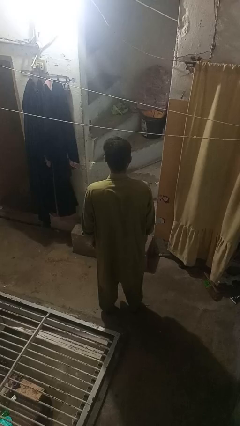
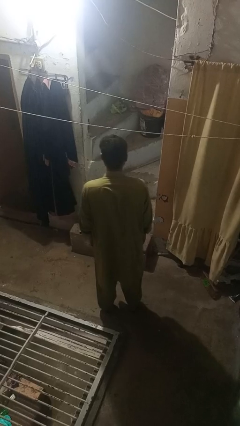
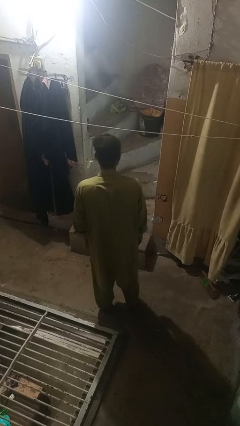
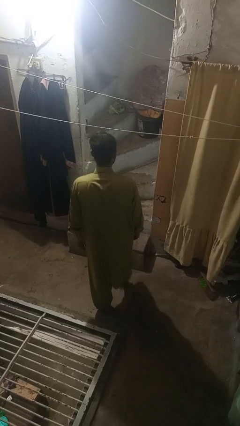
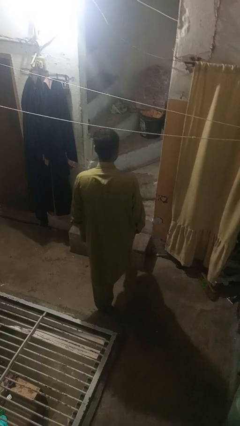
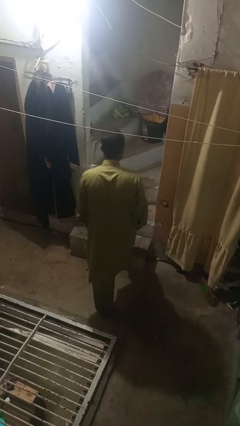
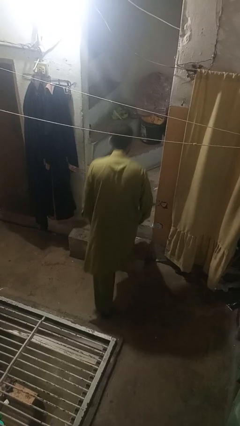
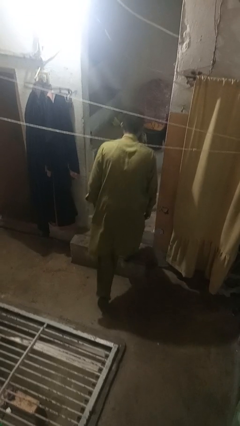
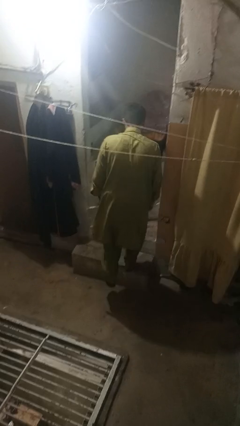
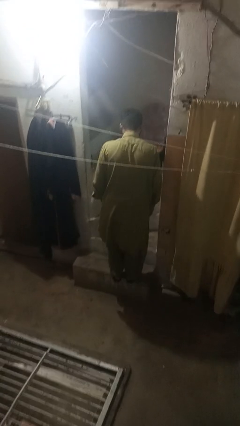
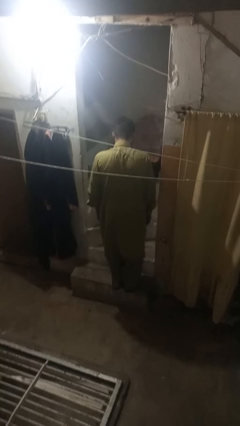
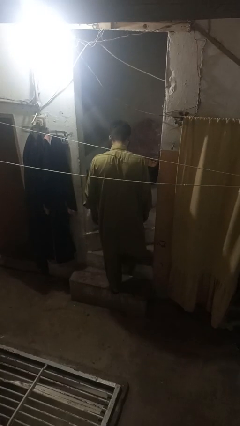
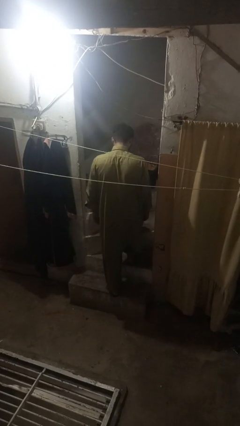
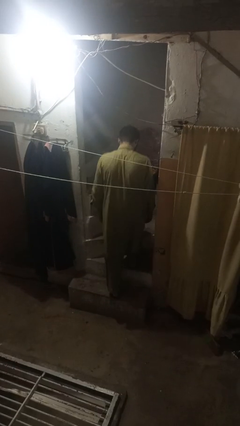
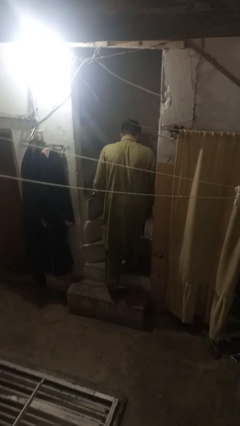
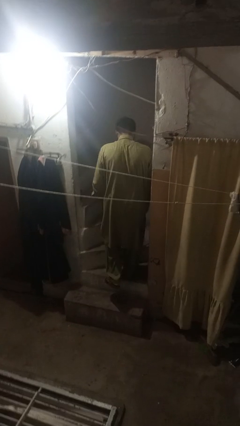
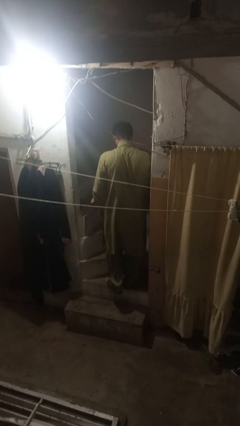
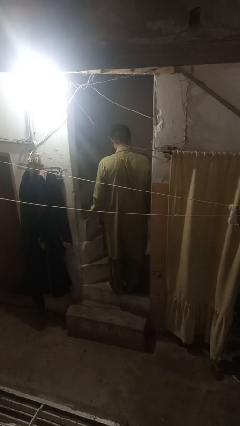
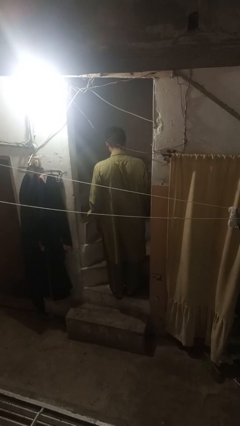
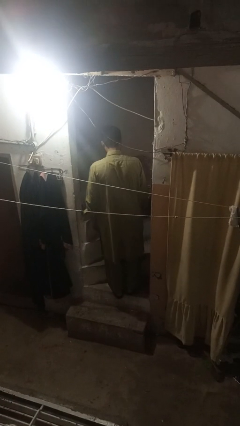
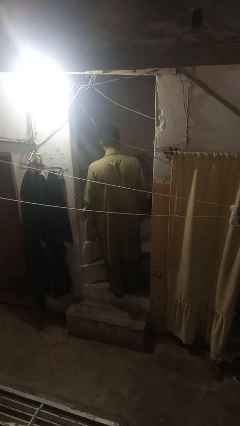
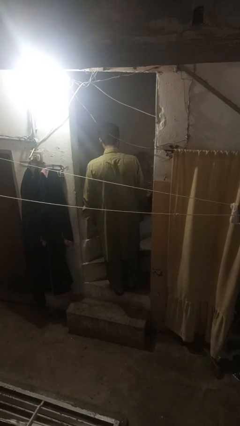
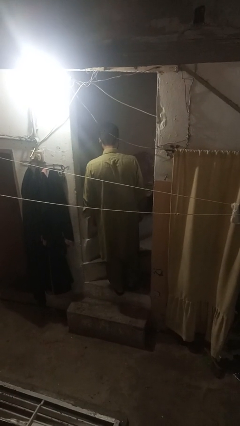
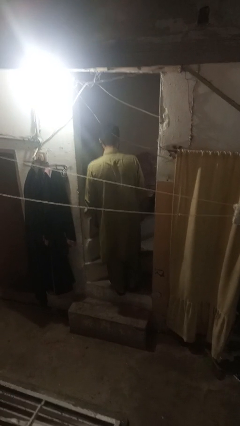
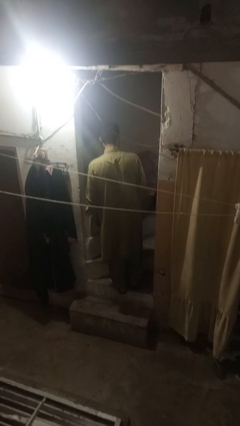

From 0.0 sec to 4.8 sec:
person climbs up stairs

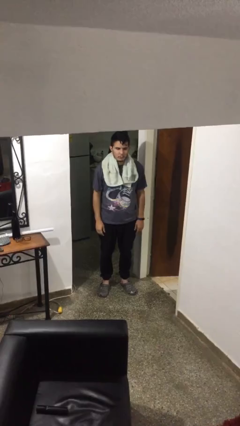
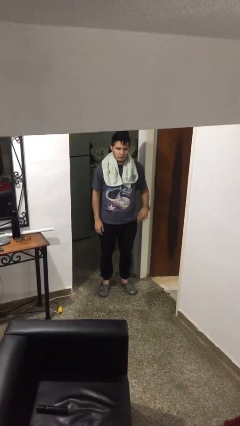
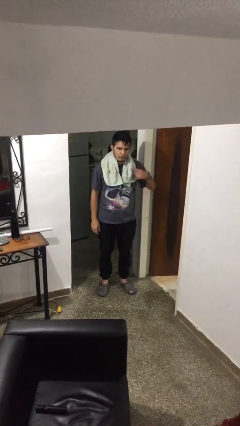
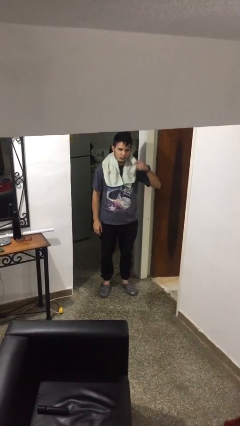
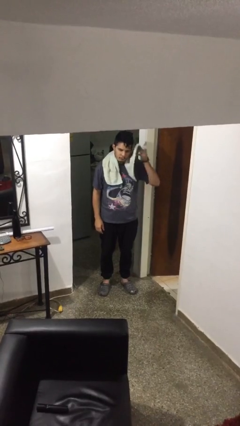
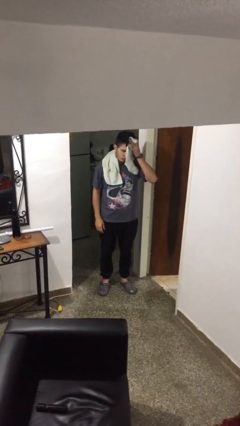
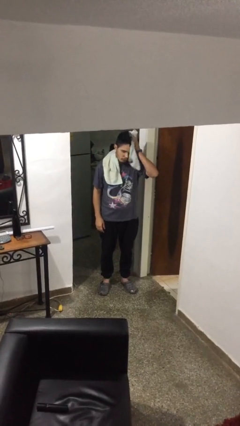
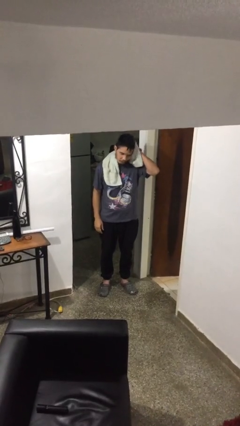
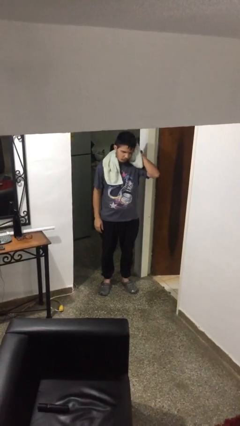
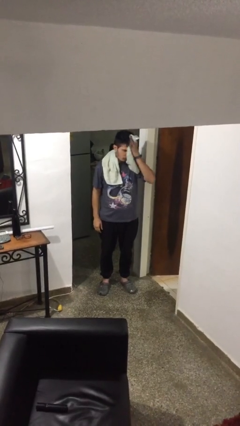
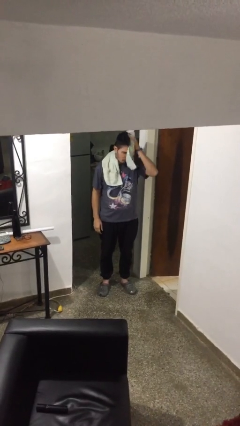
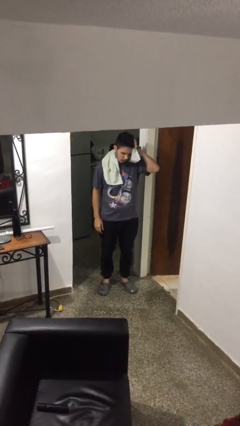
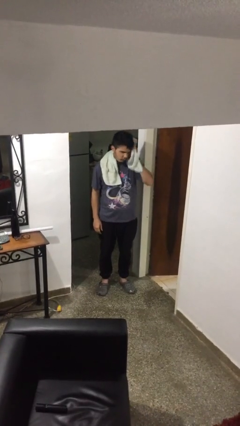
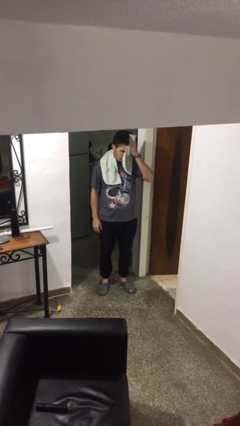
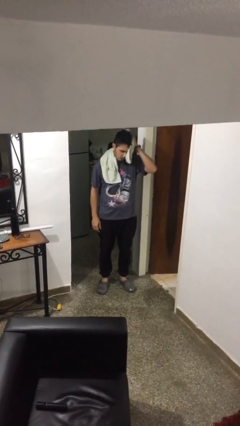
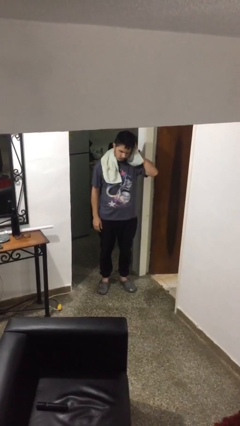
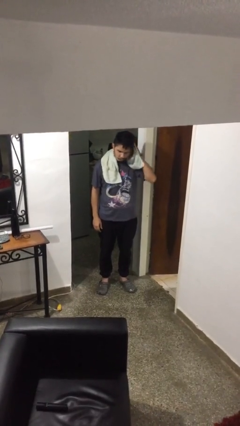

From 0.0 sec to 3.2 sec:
person dries hair with towel

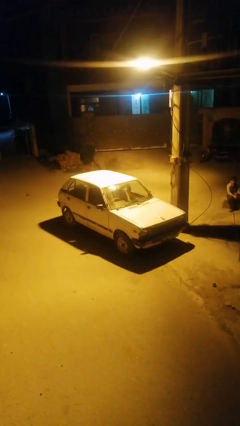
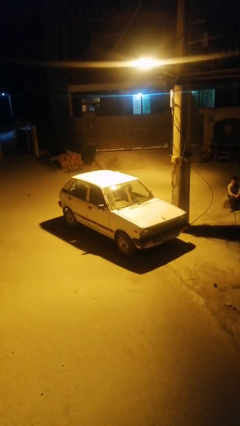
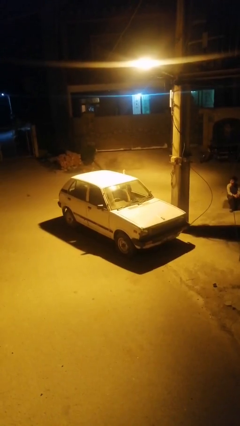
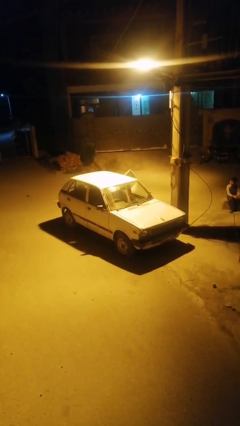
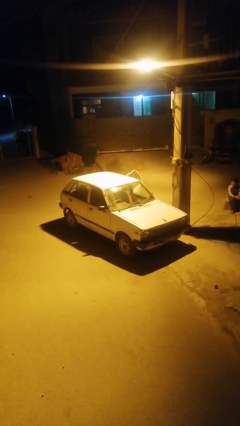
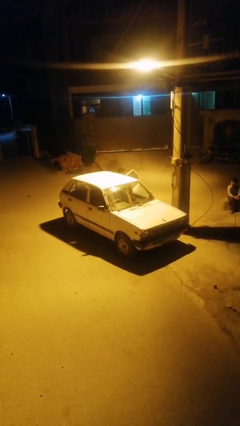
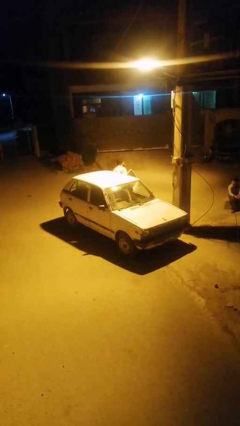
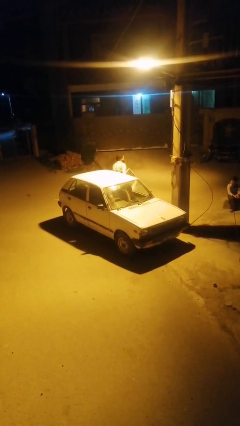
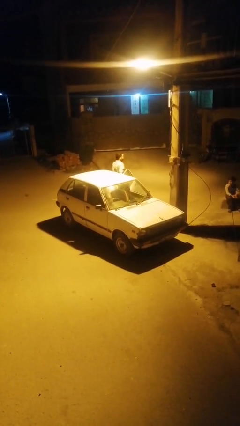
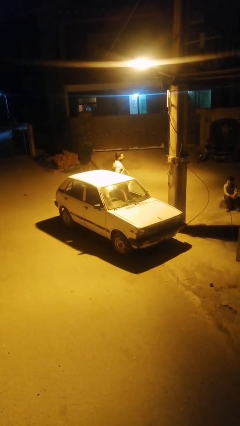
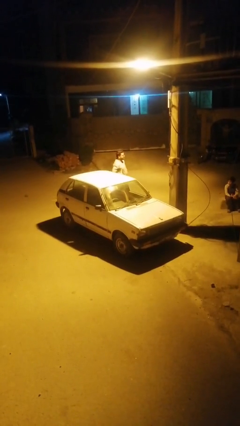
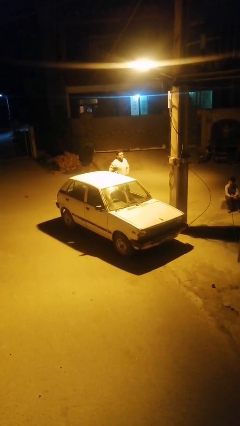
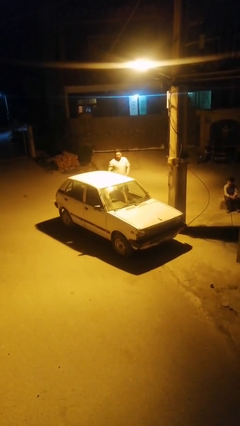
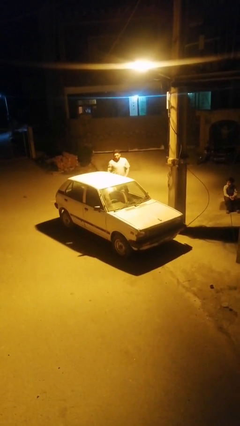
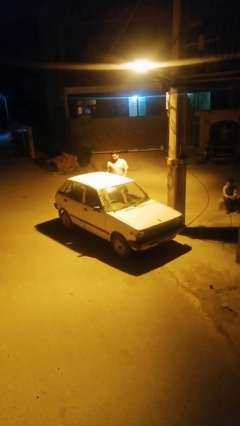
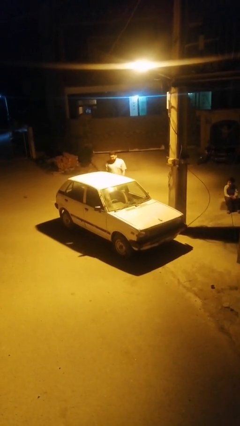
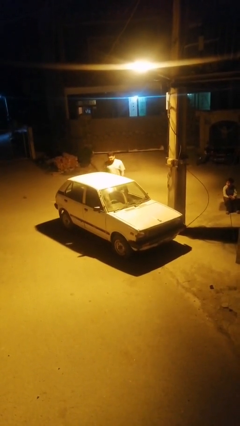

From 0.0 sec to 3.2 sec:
car drops off person

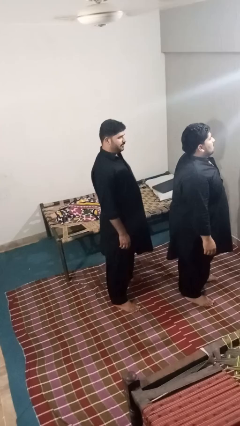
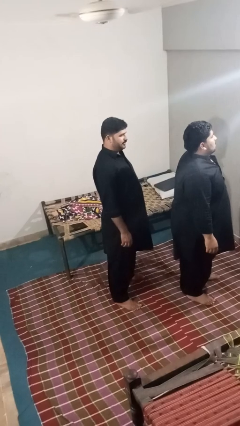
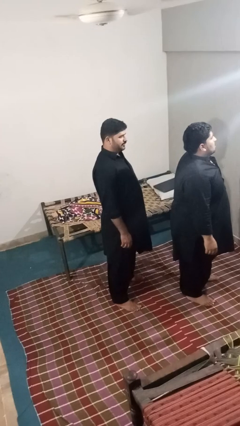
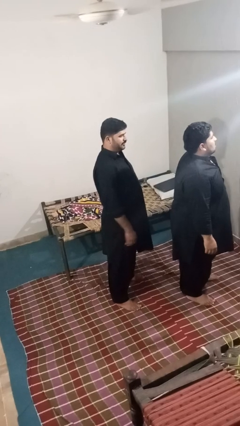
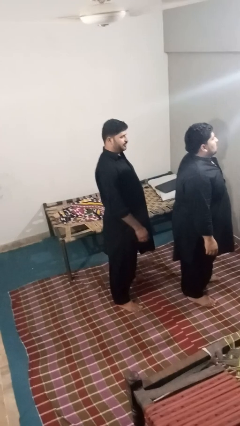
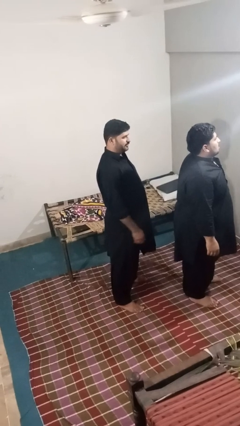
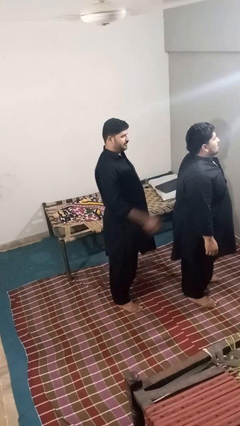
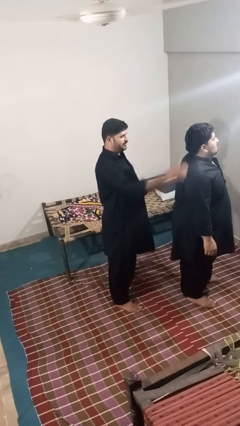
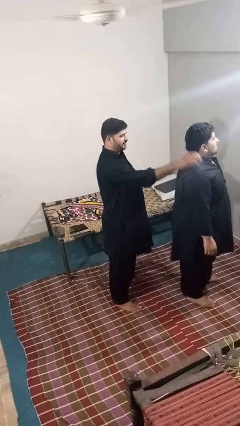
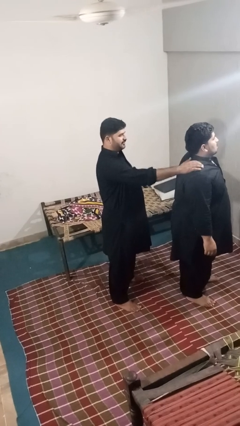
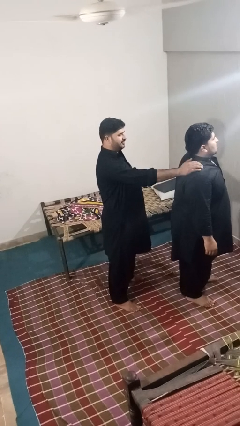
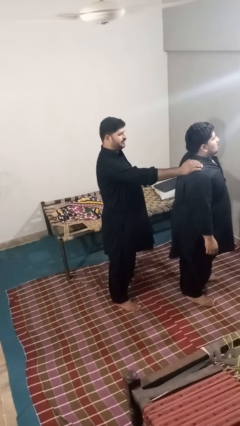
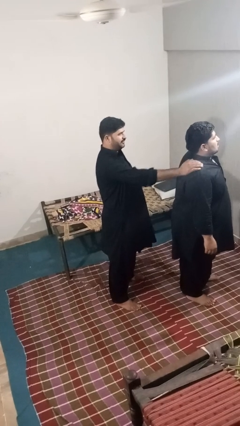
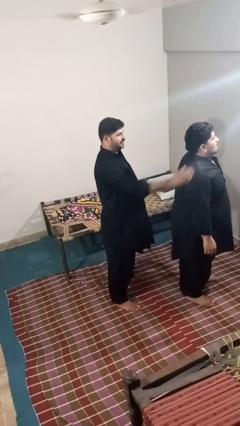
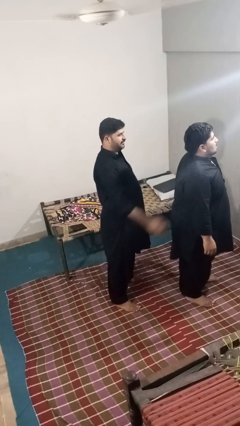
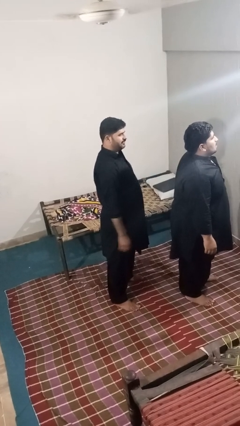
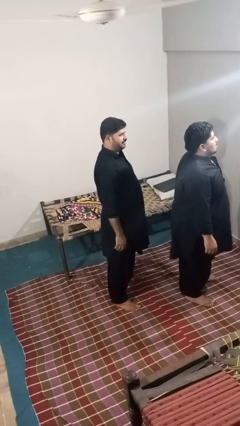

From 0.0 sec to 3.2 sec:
person touches back of person

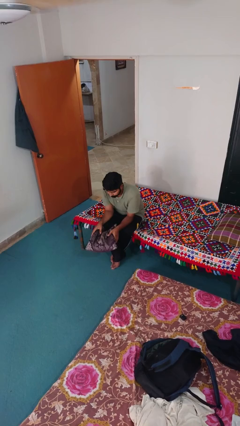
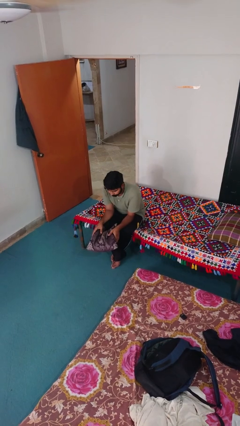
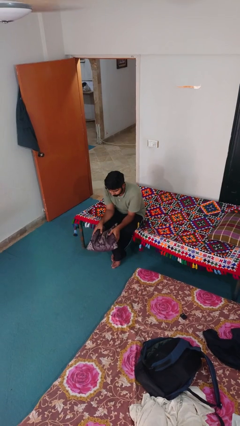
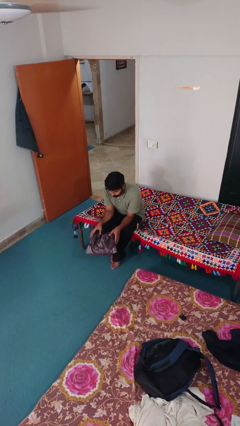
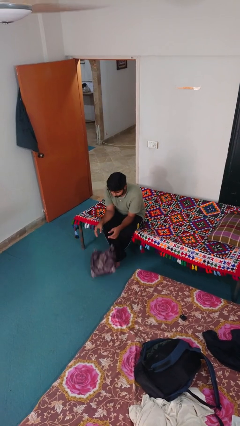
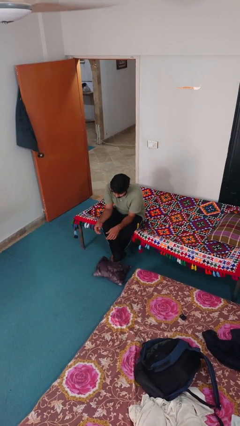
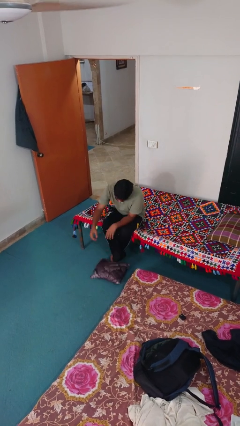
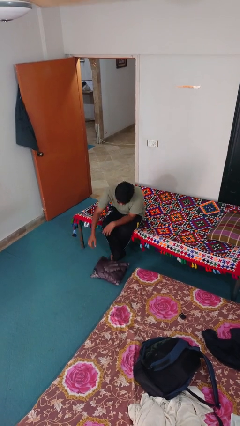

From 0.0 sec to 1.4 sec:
person drops object

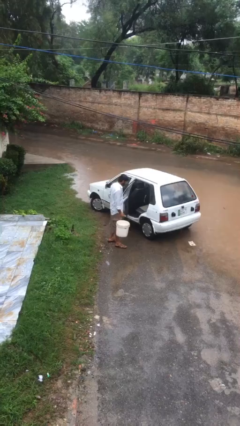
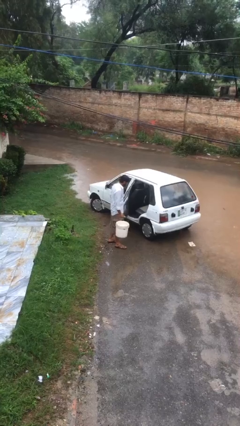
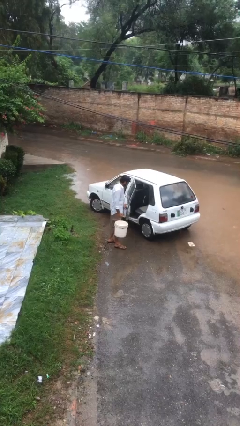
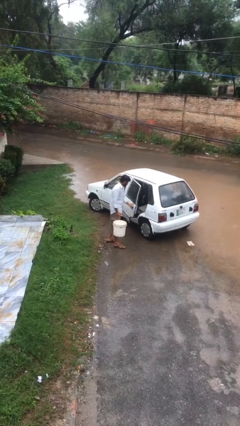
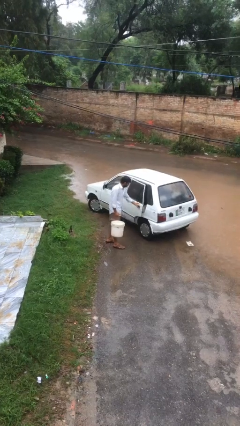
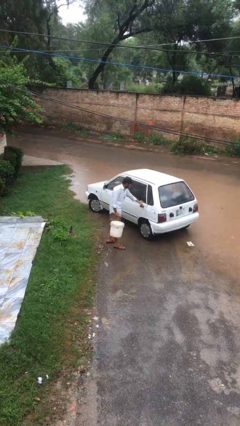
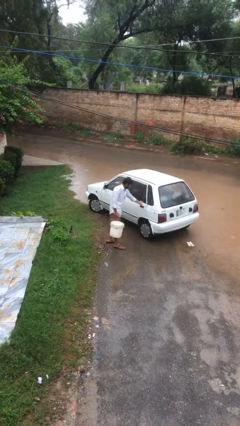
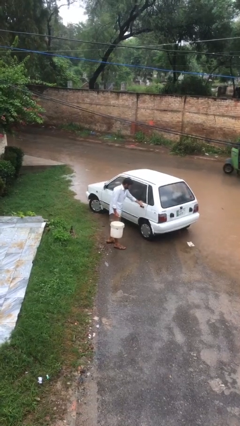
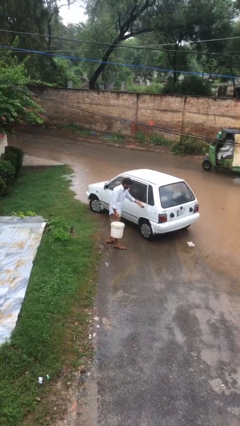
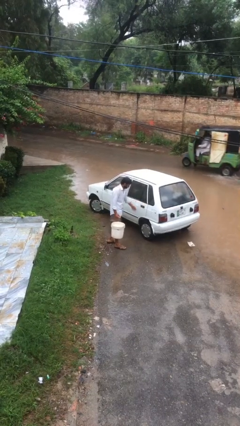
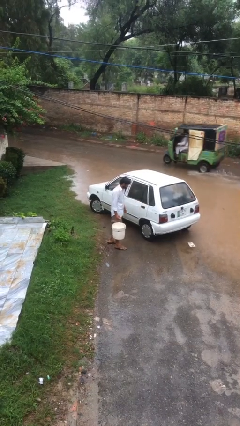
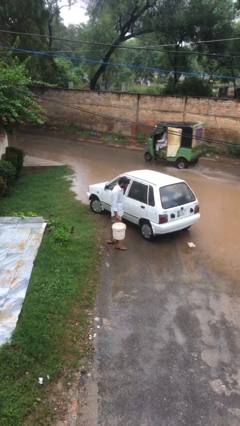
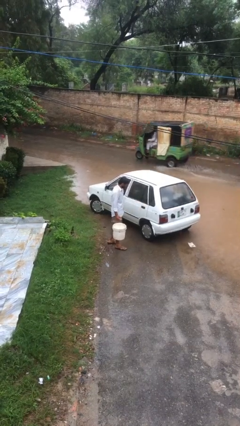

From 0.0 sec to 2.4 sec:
person closes car door
